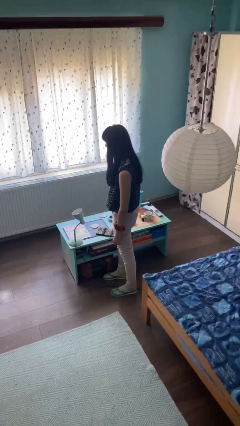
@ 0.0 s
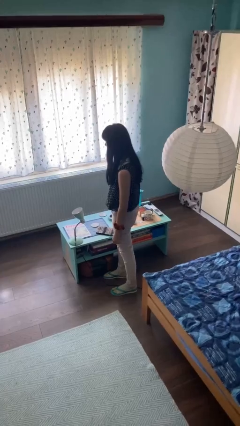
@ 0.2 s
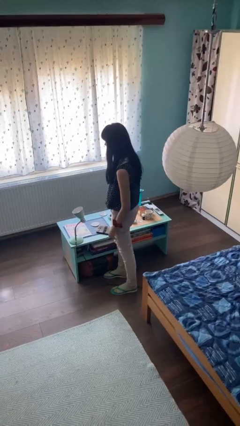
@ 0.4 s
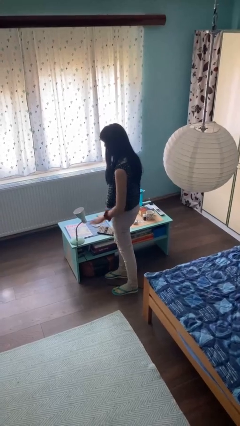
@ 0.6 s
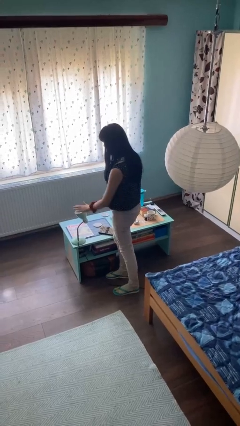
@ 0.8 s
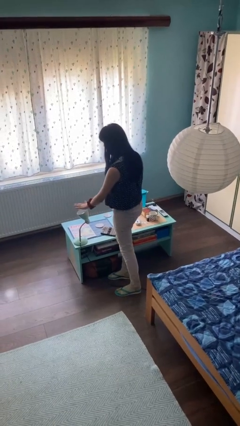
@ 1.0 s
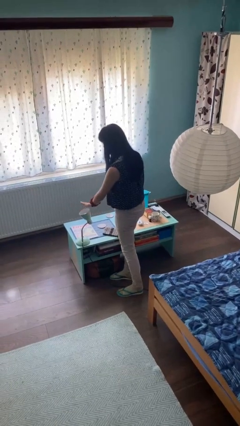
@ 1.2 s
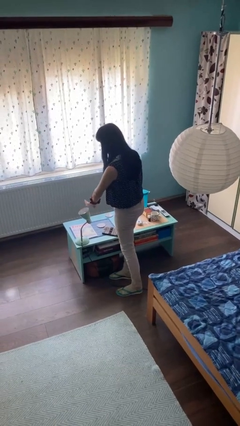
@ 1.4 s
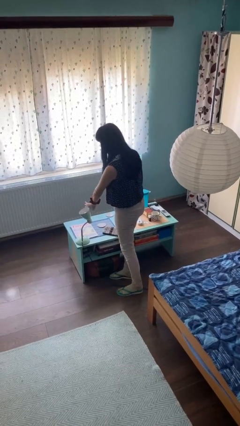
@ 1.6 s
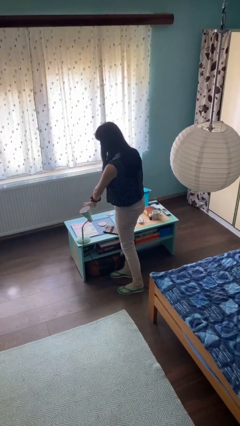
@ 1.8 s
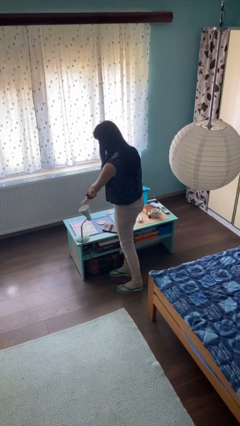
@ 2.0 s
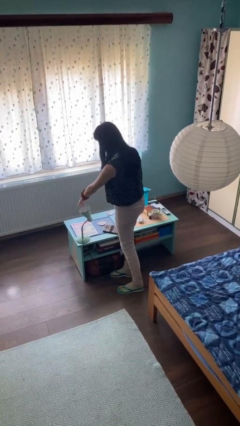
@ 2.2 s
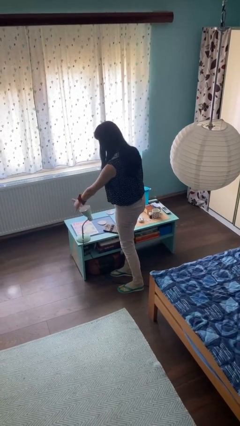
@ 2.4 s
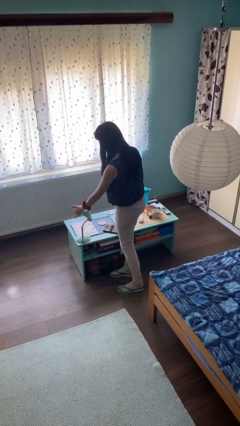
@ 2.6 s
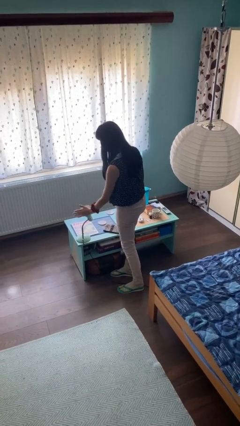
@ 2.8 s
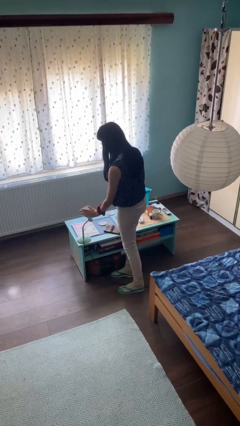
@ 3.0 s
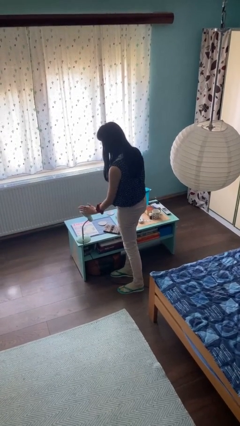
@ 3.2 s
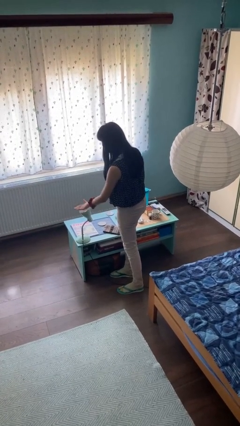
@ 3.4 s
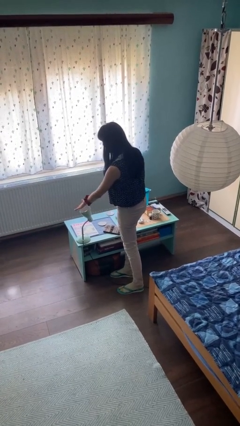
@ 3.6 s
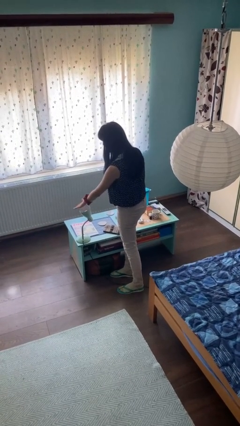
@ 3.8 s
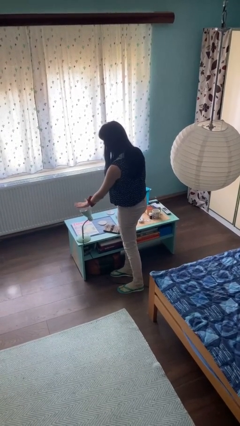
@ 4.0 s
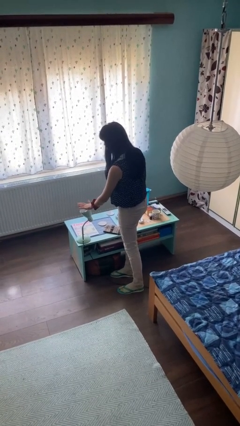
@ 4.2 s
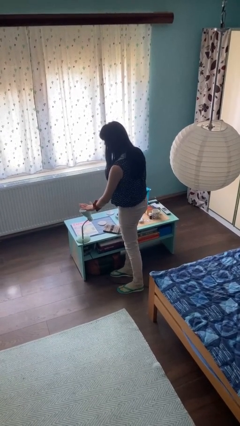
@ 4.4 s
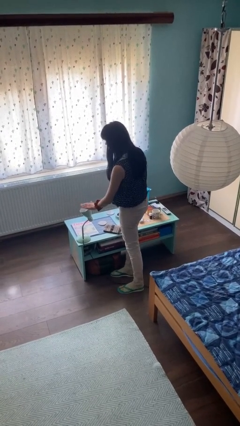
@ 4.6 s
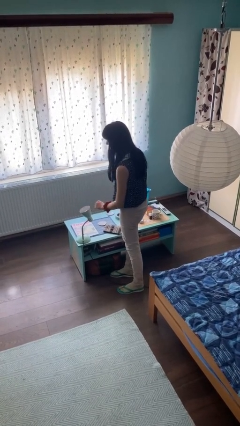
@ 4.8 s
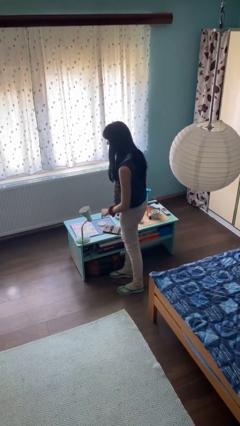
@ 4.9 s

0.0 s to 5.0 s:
person waves hand over object

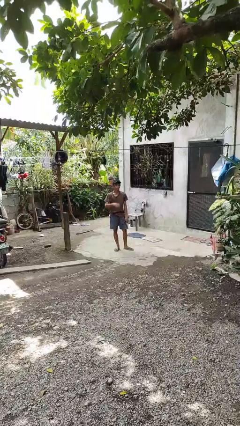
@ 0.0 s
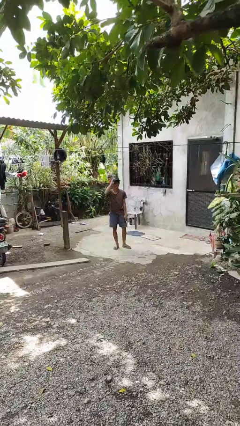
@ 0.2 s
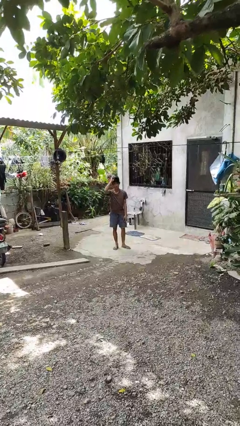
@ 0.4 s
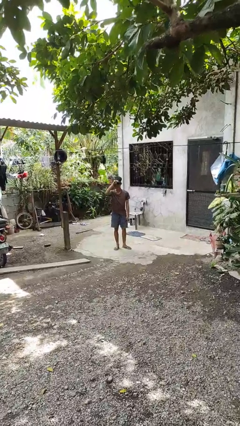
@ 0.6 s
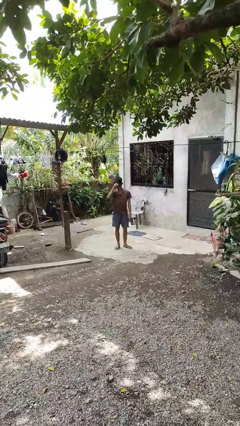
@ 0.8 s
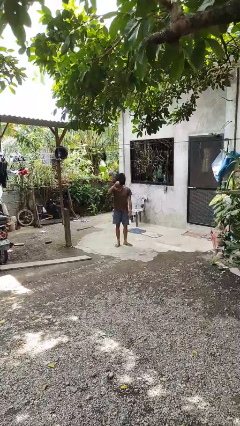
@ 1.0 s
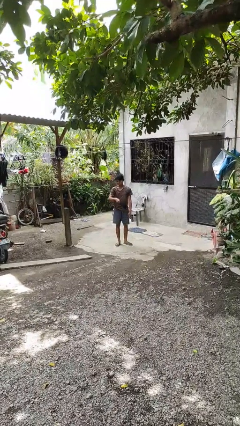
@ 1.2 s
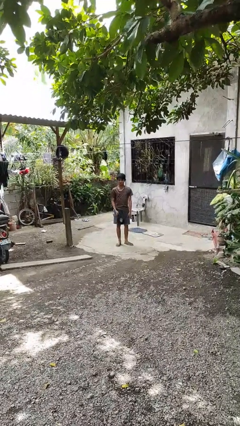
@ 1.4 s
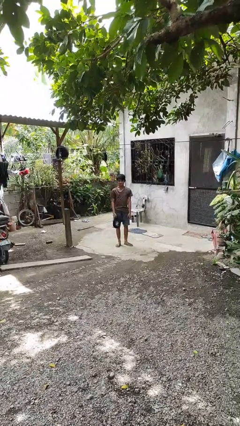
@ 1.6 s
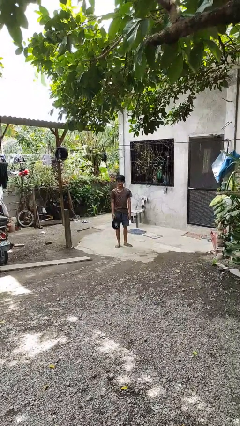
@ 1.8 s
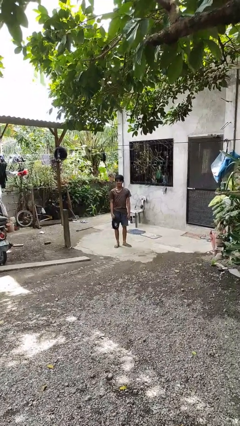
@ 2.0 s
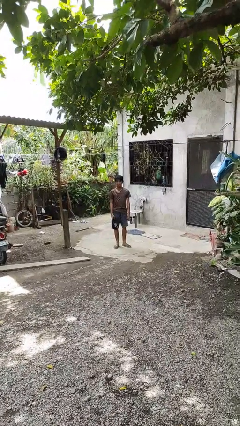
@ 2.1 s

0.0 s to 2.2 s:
person takes off hat

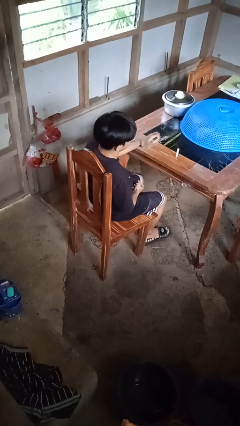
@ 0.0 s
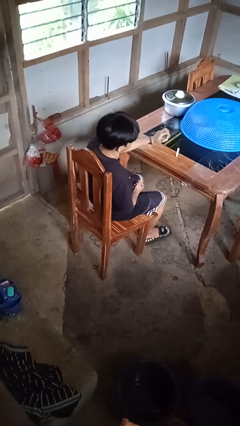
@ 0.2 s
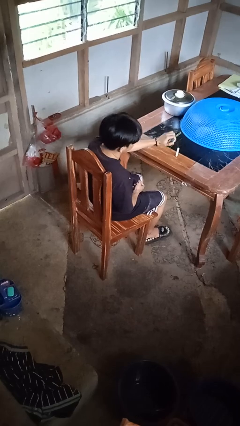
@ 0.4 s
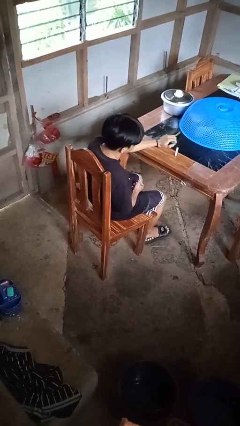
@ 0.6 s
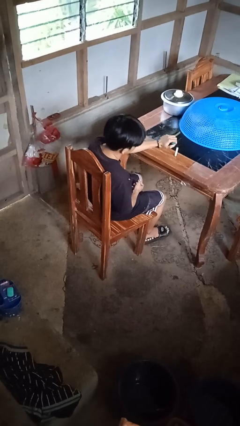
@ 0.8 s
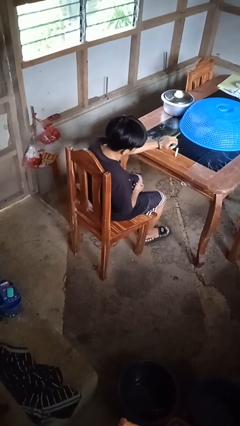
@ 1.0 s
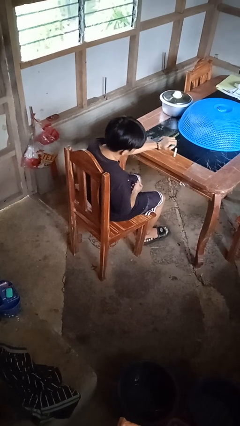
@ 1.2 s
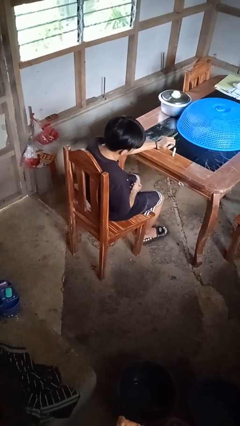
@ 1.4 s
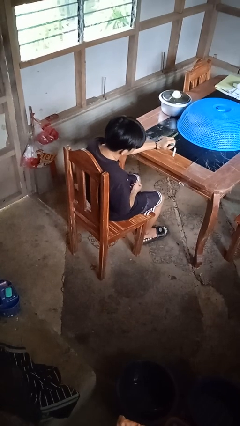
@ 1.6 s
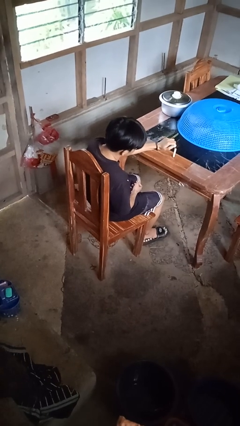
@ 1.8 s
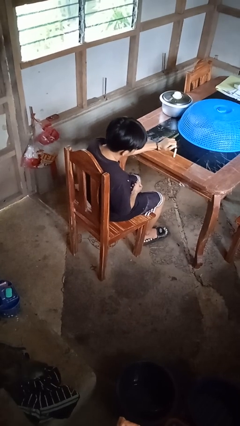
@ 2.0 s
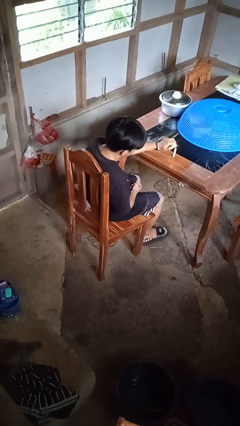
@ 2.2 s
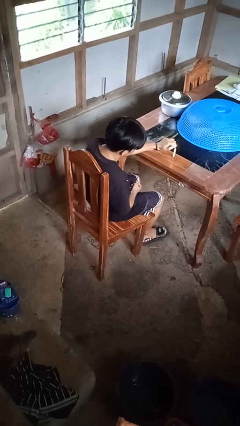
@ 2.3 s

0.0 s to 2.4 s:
person lights candle

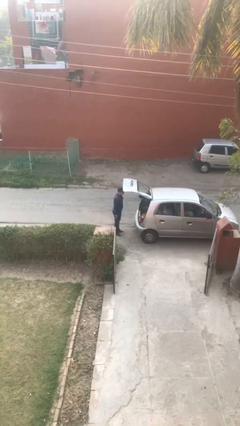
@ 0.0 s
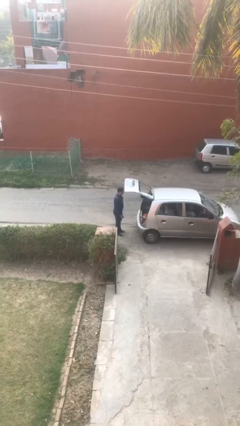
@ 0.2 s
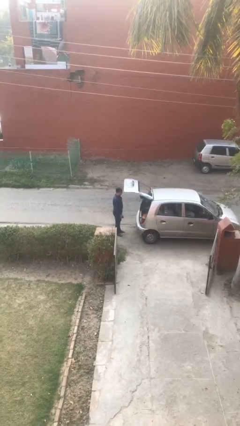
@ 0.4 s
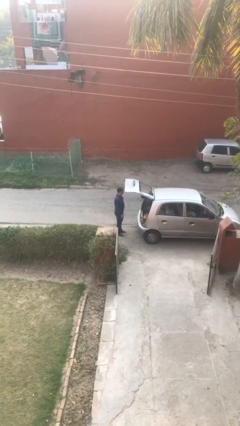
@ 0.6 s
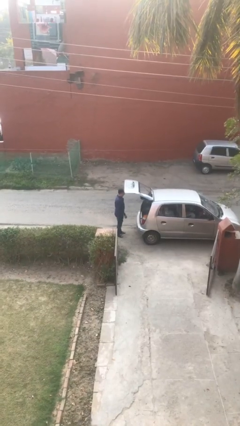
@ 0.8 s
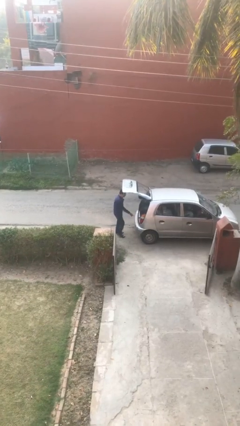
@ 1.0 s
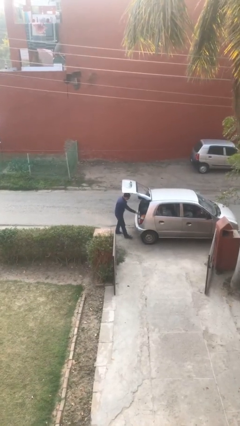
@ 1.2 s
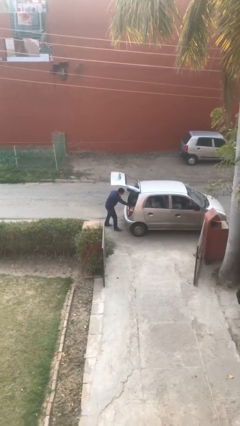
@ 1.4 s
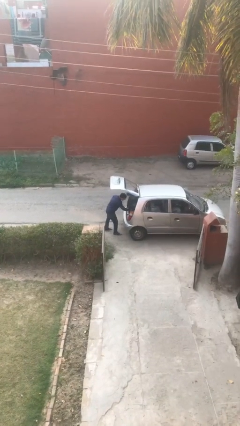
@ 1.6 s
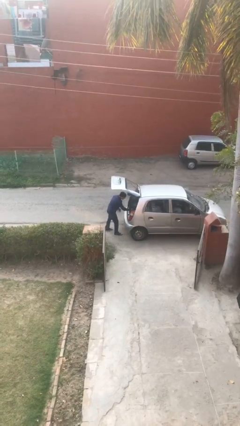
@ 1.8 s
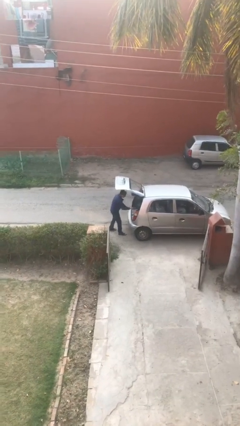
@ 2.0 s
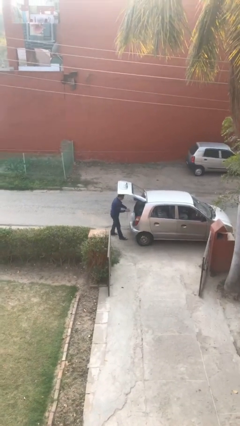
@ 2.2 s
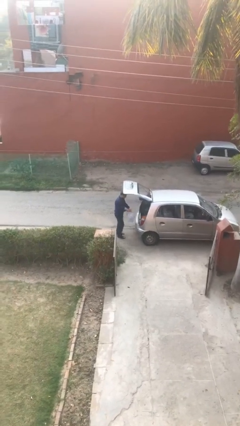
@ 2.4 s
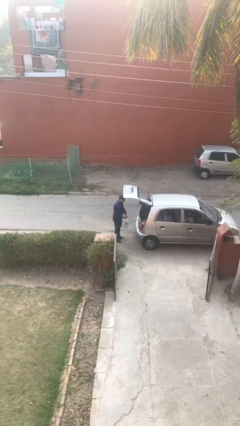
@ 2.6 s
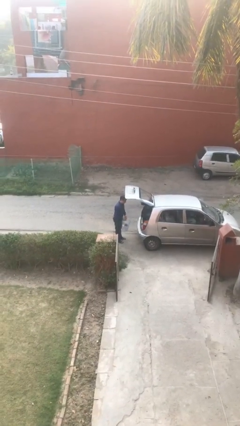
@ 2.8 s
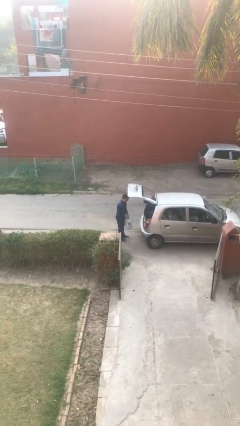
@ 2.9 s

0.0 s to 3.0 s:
person unloads car

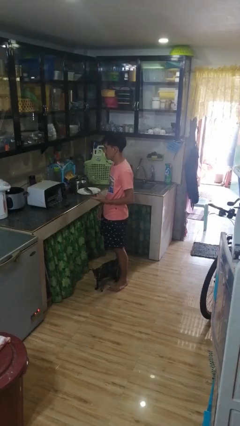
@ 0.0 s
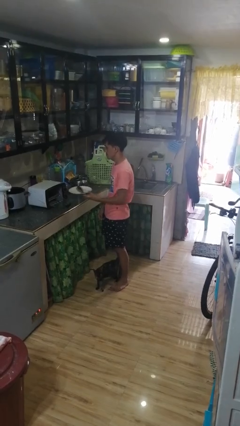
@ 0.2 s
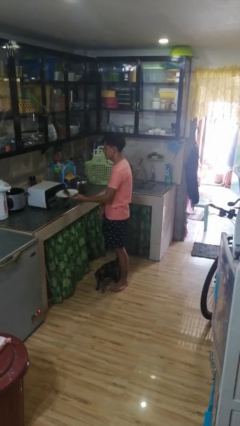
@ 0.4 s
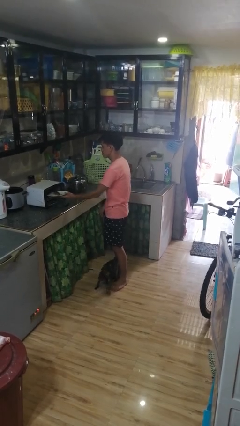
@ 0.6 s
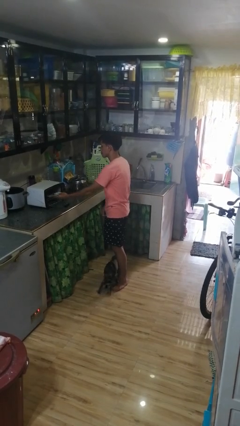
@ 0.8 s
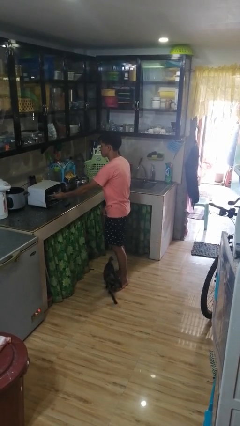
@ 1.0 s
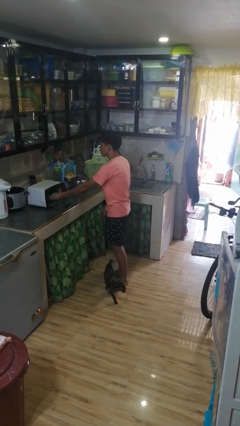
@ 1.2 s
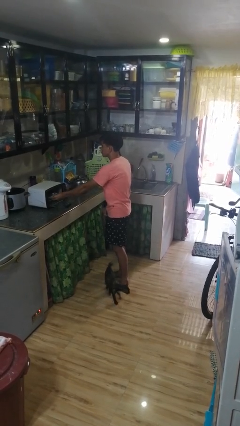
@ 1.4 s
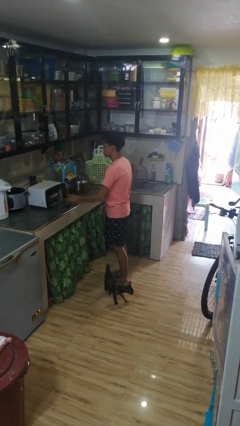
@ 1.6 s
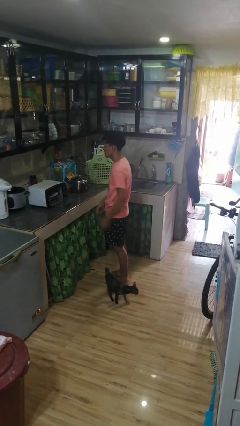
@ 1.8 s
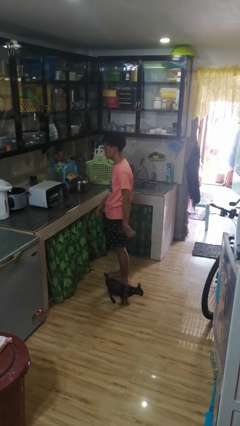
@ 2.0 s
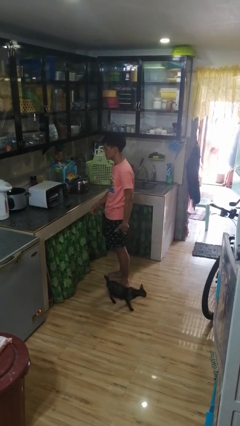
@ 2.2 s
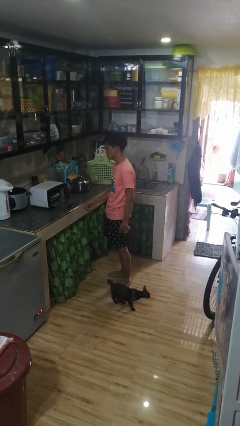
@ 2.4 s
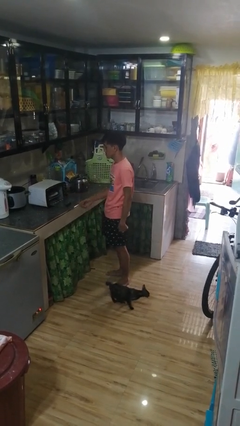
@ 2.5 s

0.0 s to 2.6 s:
person puts object into microwave

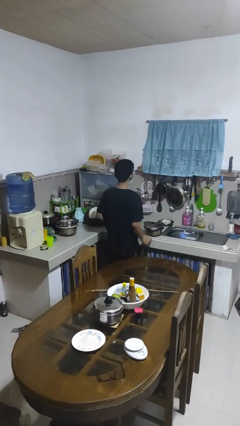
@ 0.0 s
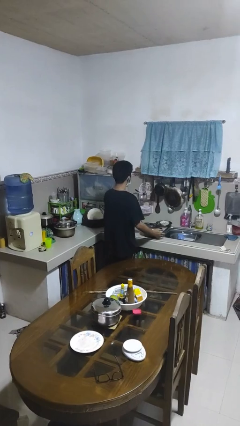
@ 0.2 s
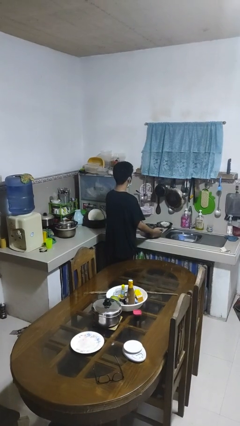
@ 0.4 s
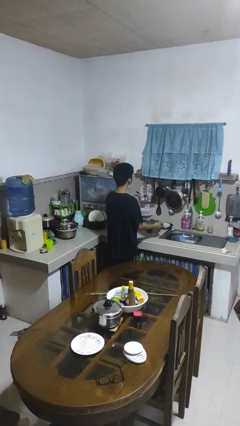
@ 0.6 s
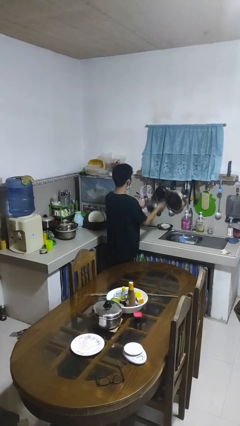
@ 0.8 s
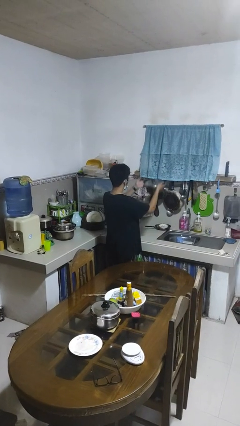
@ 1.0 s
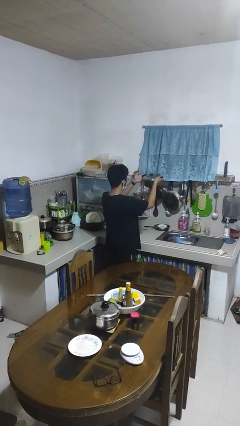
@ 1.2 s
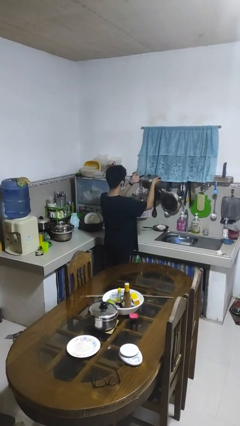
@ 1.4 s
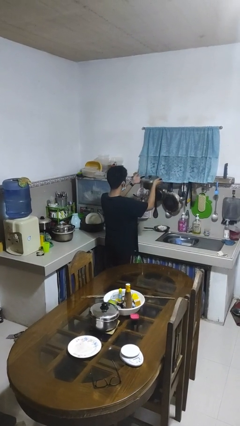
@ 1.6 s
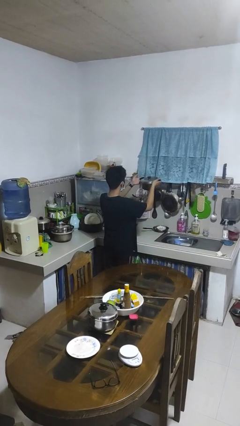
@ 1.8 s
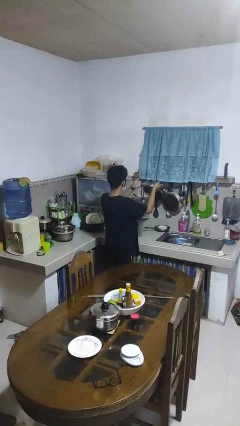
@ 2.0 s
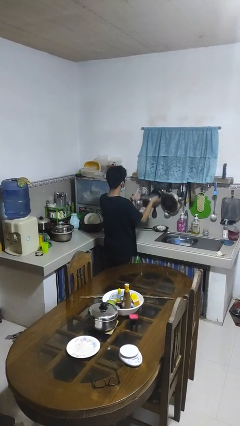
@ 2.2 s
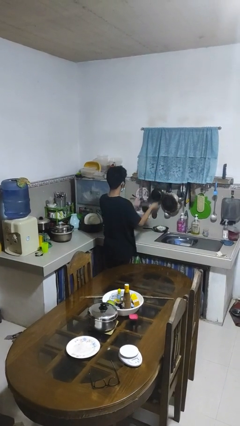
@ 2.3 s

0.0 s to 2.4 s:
person picks up object from countertop
